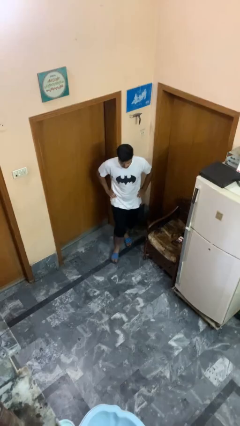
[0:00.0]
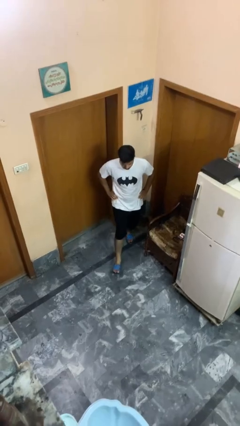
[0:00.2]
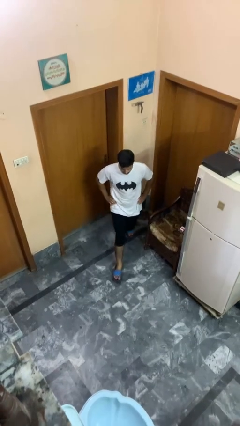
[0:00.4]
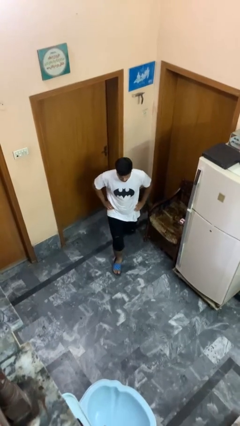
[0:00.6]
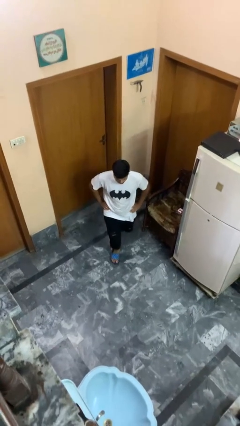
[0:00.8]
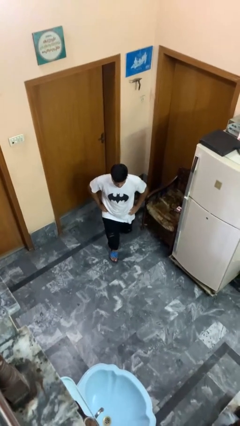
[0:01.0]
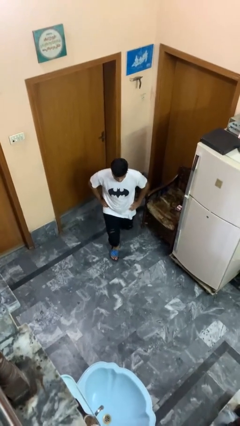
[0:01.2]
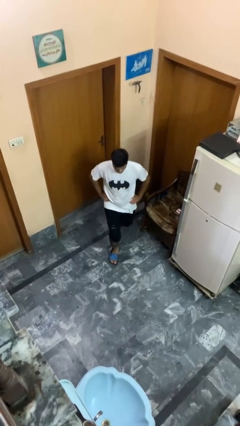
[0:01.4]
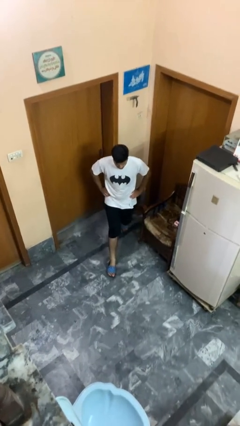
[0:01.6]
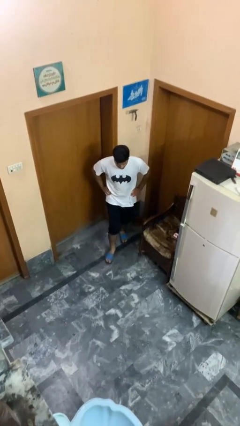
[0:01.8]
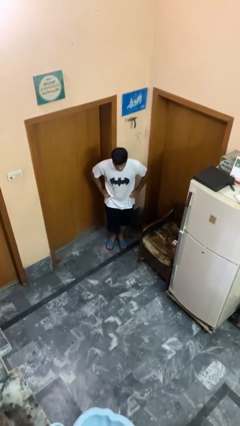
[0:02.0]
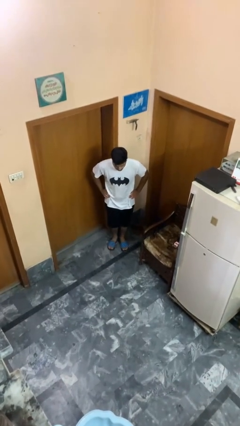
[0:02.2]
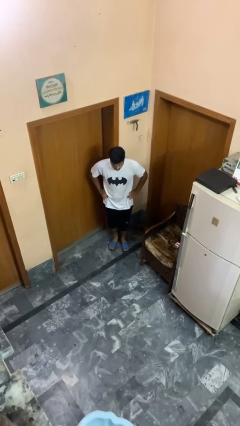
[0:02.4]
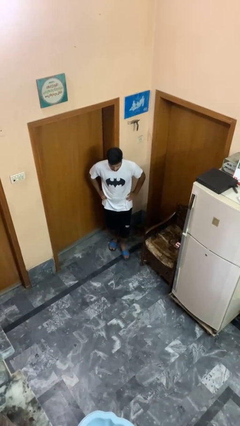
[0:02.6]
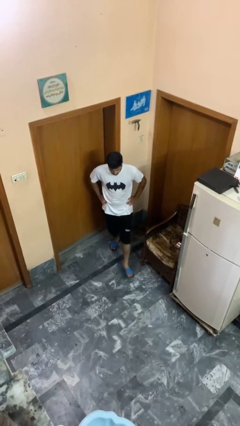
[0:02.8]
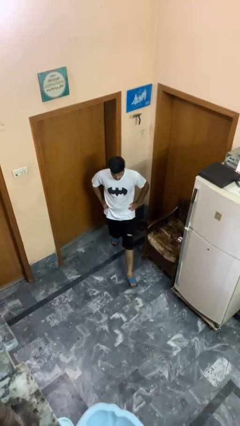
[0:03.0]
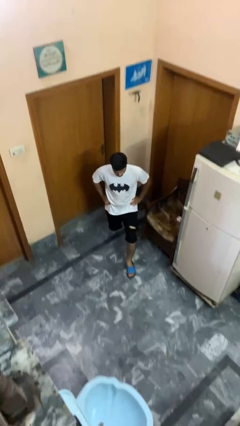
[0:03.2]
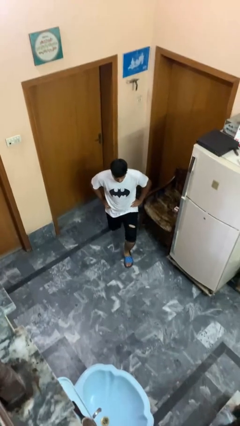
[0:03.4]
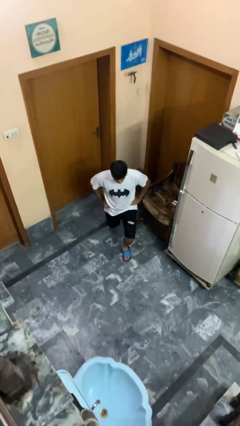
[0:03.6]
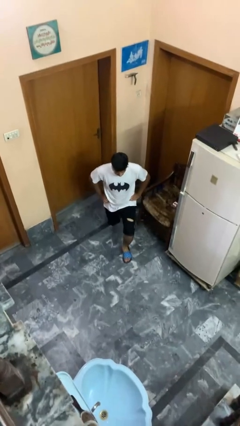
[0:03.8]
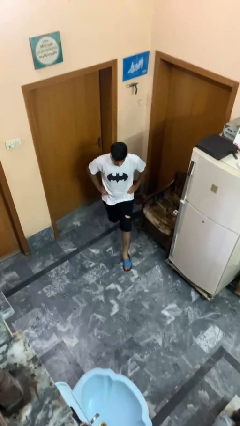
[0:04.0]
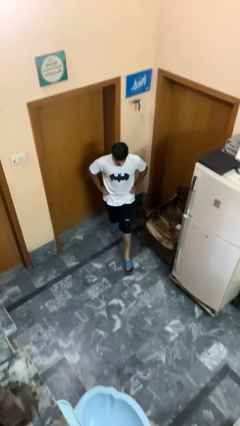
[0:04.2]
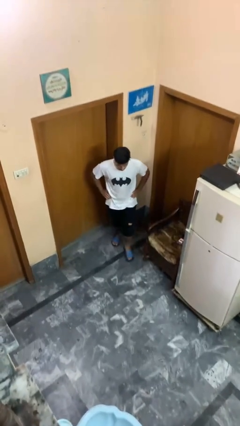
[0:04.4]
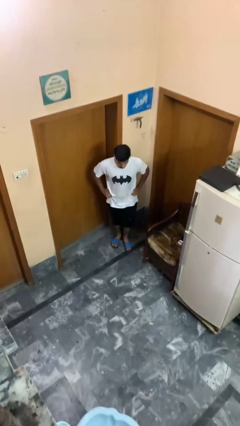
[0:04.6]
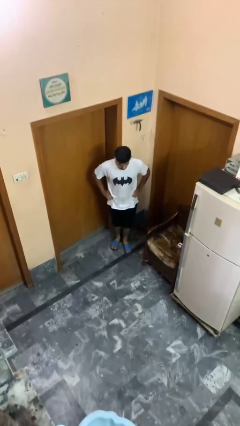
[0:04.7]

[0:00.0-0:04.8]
person exercises with lunges

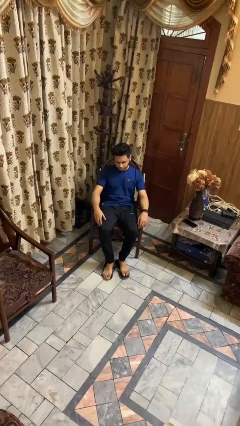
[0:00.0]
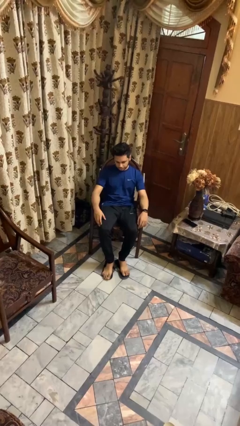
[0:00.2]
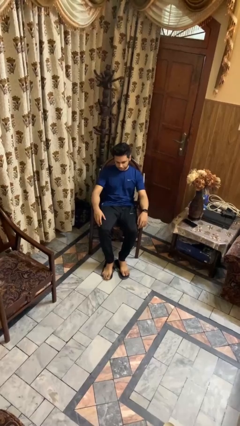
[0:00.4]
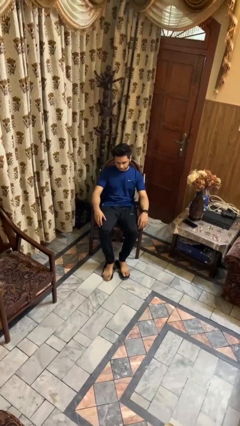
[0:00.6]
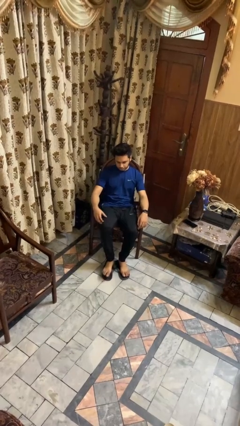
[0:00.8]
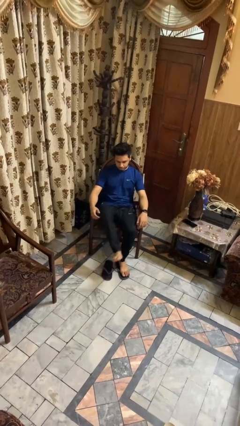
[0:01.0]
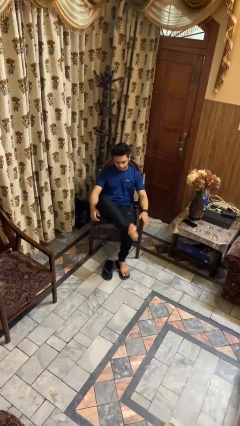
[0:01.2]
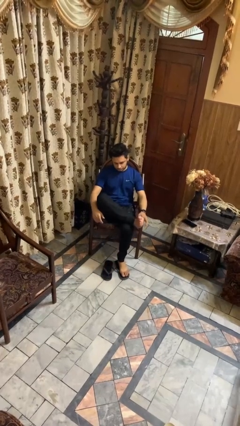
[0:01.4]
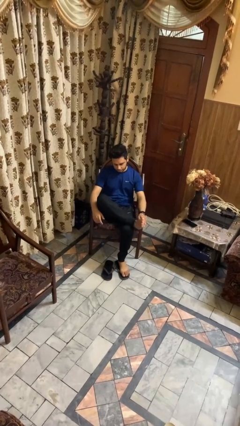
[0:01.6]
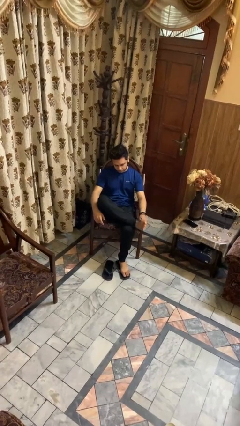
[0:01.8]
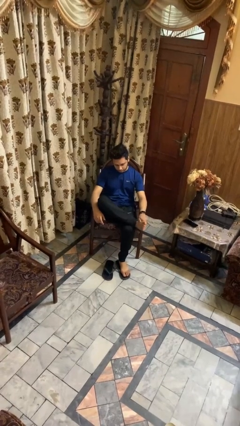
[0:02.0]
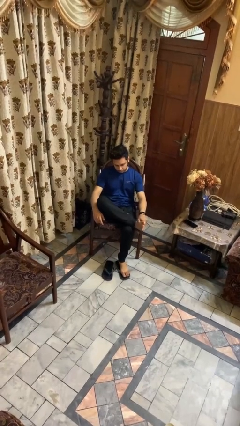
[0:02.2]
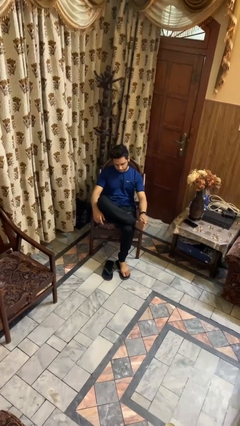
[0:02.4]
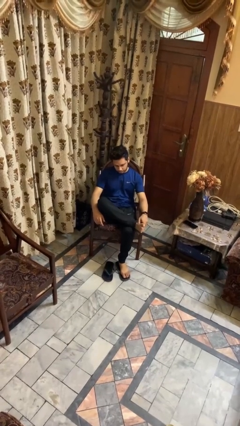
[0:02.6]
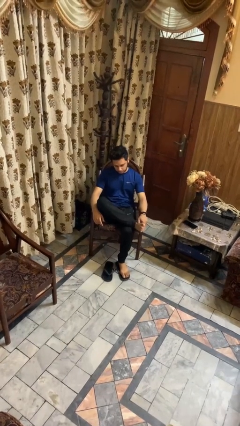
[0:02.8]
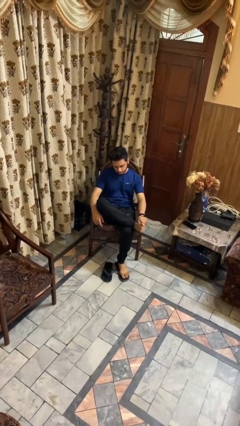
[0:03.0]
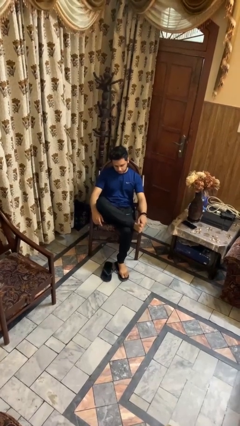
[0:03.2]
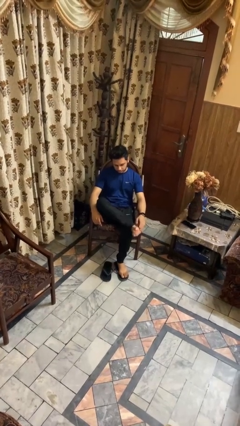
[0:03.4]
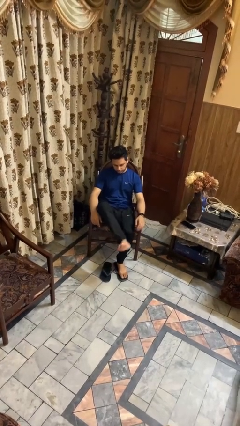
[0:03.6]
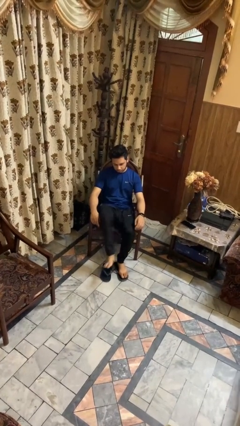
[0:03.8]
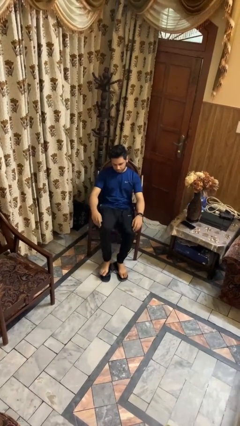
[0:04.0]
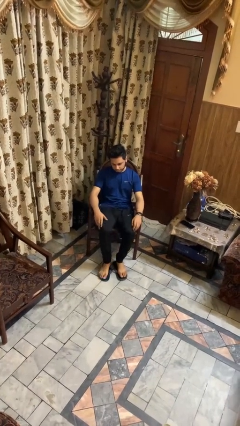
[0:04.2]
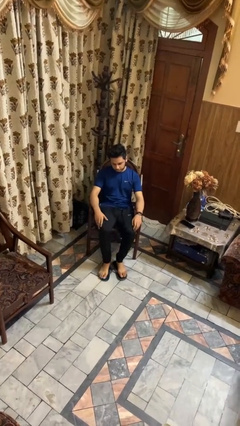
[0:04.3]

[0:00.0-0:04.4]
person rubs foot

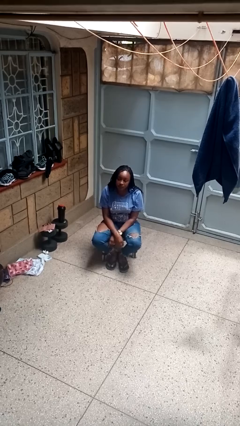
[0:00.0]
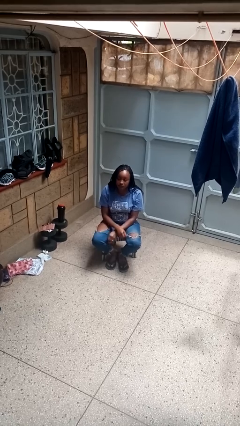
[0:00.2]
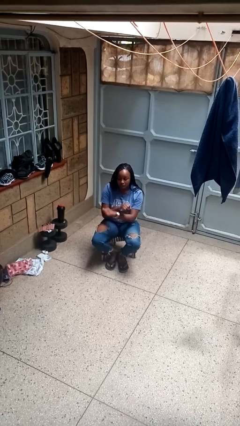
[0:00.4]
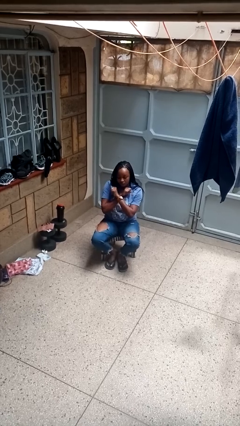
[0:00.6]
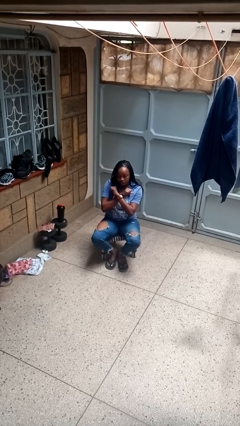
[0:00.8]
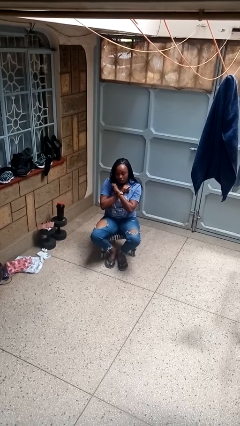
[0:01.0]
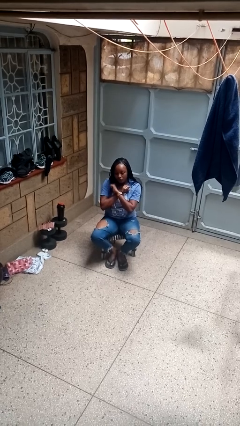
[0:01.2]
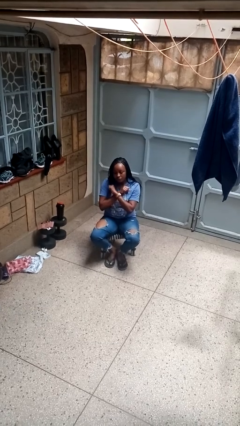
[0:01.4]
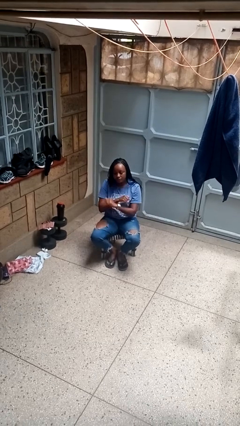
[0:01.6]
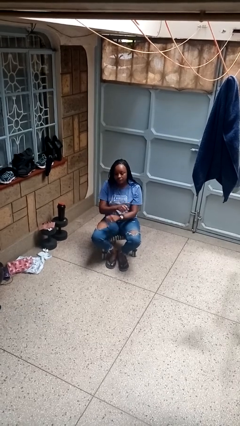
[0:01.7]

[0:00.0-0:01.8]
person gestures arms x

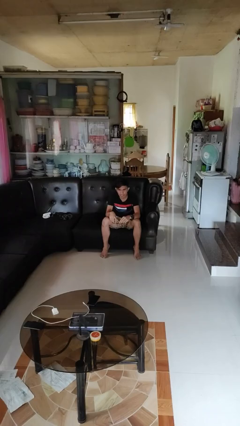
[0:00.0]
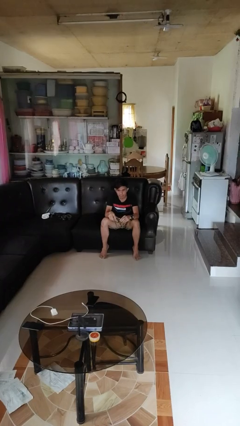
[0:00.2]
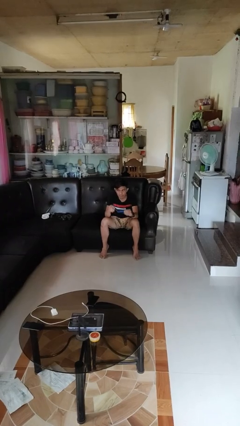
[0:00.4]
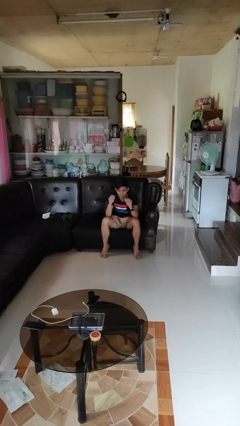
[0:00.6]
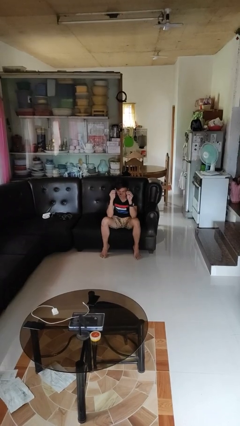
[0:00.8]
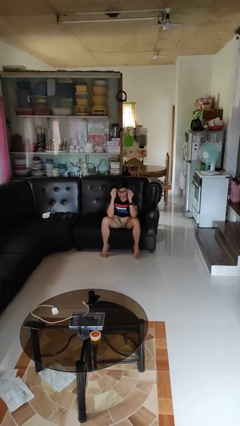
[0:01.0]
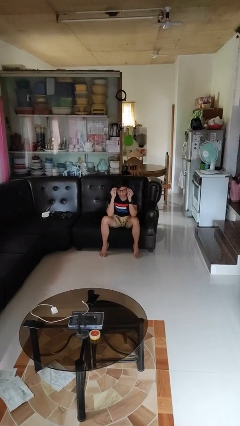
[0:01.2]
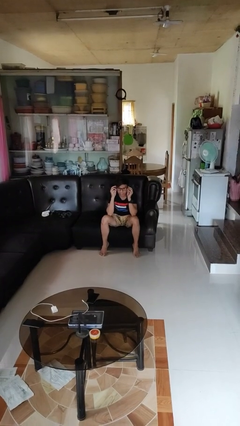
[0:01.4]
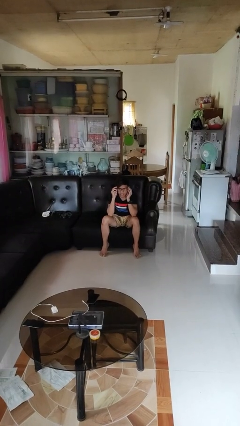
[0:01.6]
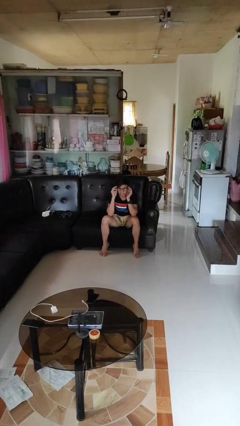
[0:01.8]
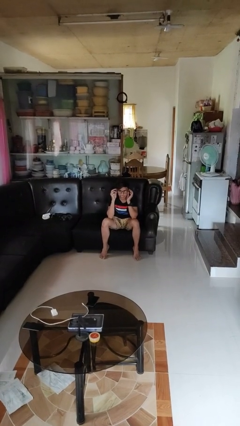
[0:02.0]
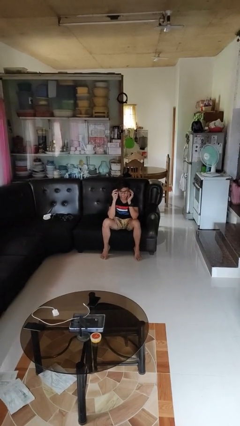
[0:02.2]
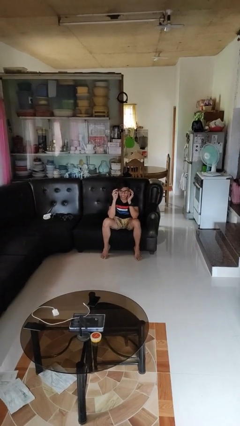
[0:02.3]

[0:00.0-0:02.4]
person puts on glasses

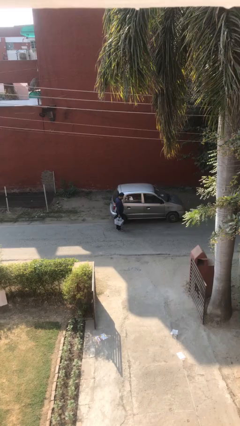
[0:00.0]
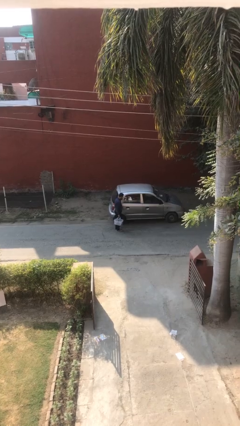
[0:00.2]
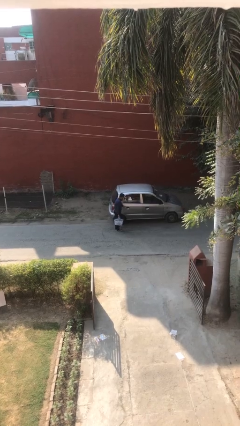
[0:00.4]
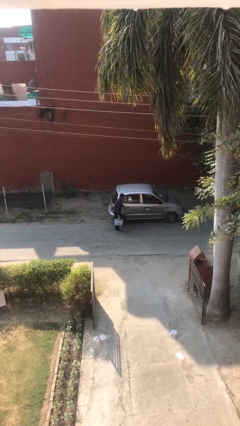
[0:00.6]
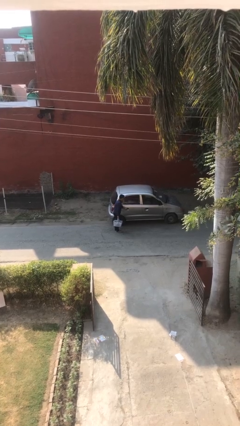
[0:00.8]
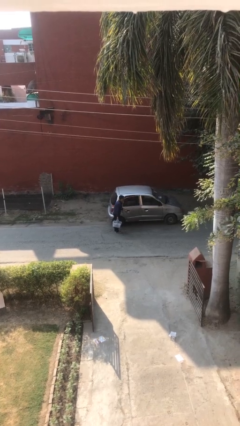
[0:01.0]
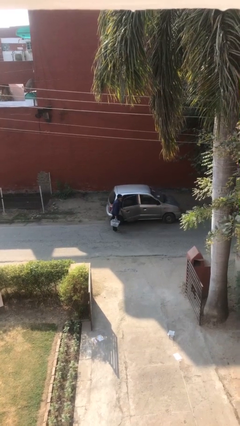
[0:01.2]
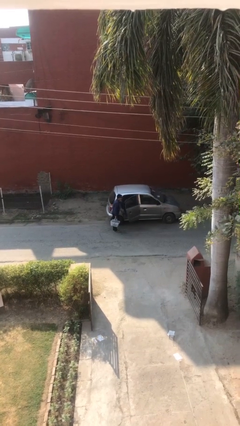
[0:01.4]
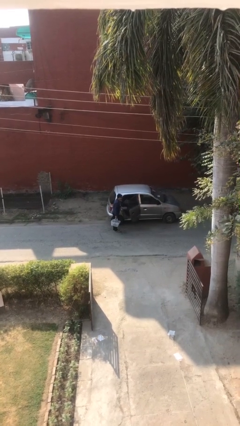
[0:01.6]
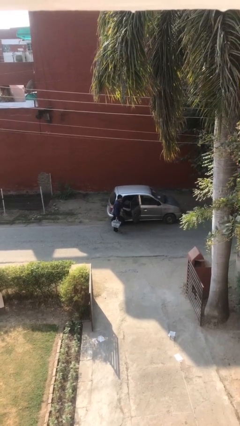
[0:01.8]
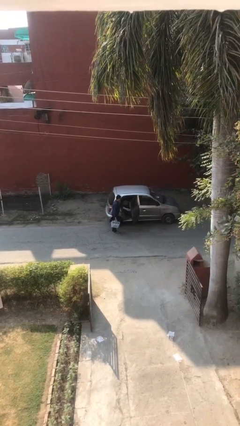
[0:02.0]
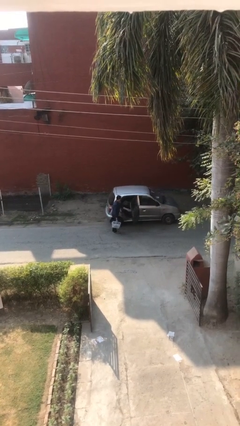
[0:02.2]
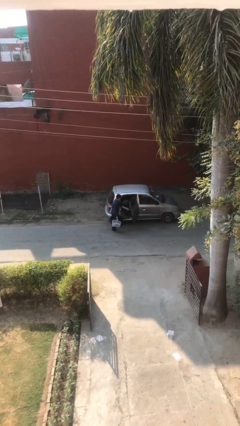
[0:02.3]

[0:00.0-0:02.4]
person opens car door

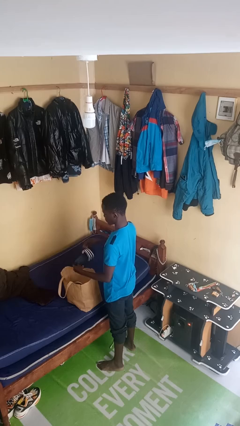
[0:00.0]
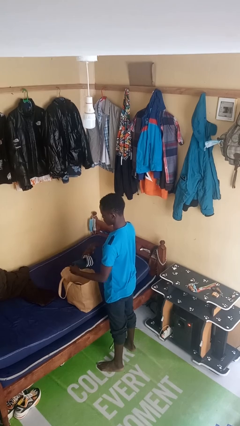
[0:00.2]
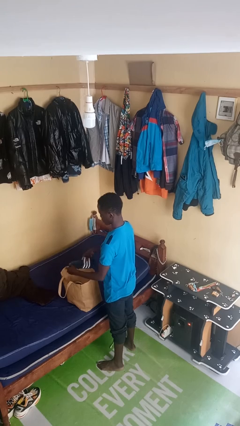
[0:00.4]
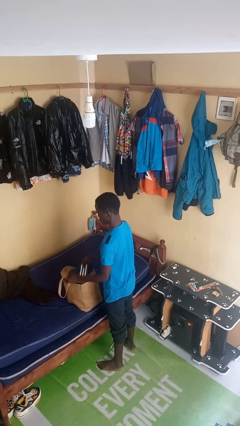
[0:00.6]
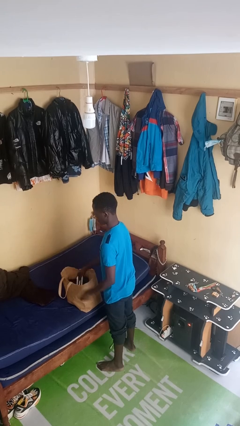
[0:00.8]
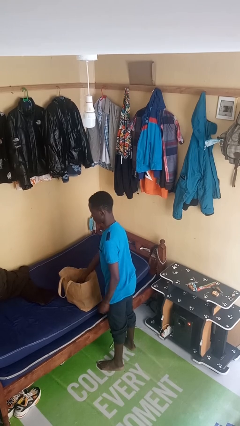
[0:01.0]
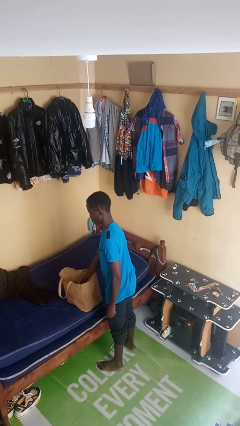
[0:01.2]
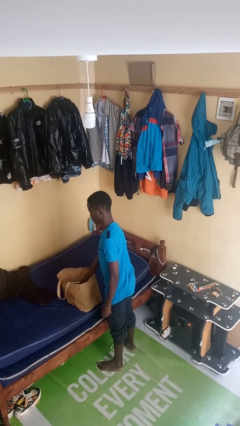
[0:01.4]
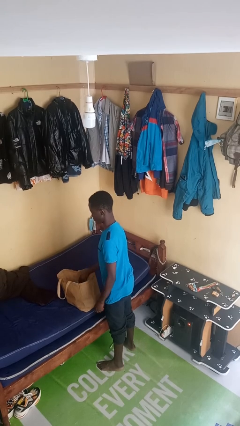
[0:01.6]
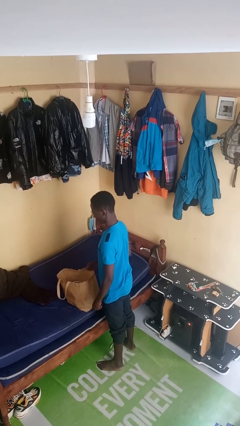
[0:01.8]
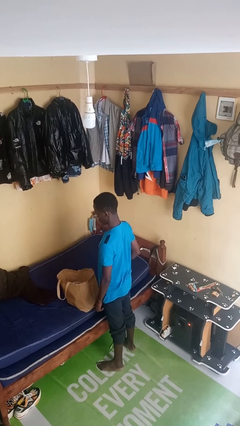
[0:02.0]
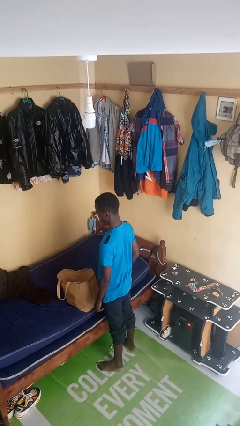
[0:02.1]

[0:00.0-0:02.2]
person puts object into bag
